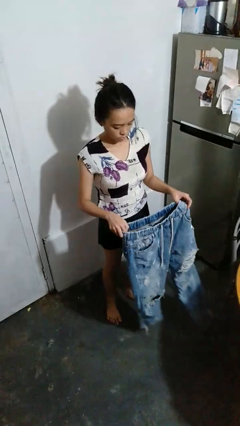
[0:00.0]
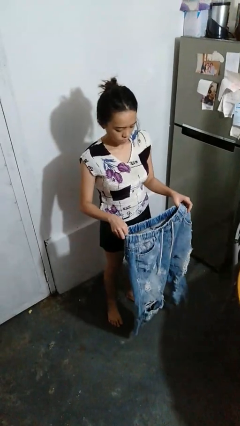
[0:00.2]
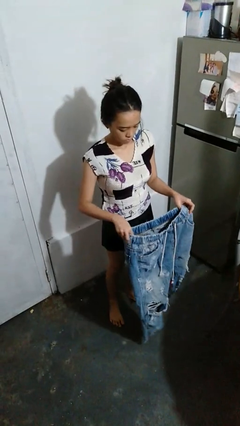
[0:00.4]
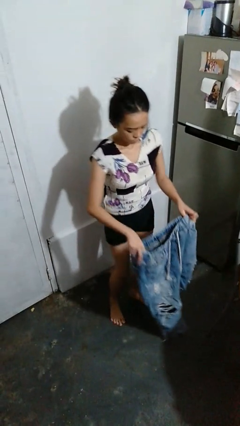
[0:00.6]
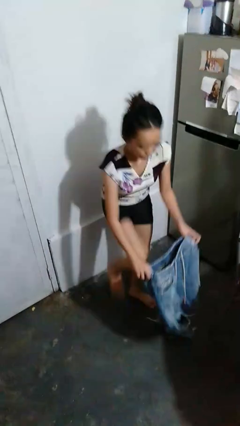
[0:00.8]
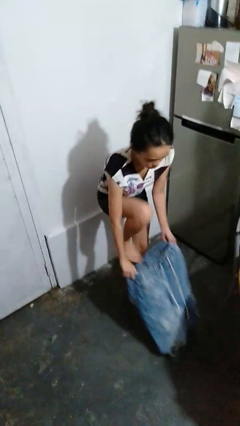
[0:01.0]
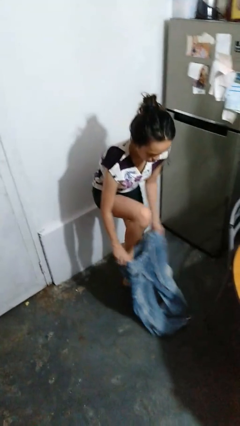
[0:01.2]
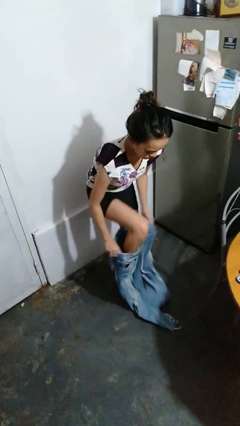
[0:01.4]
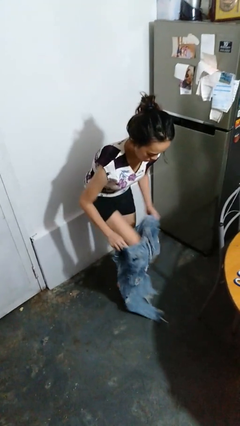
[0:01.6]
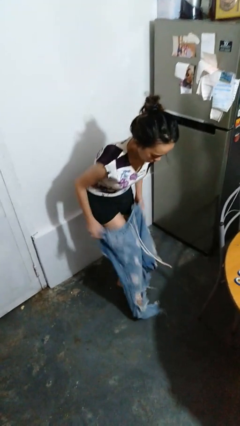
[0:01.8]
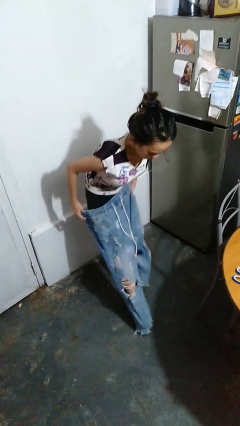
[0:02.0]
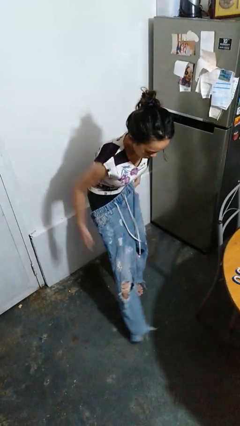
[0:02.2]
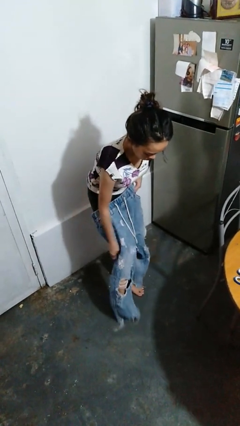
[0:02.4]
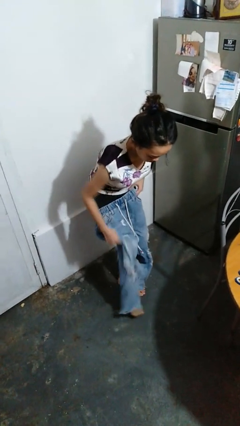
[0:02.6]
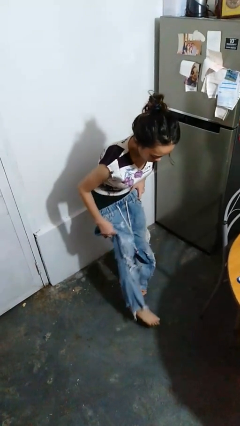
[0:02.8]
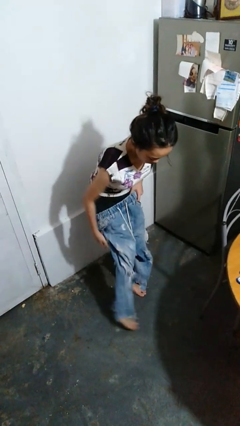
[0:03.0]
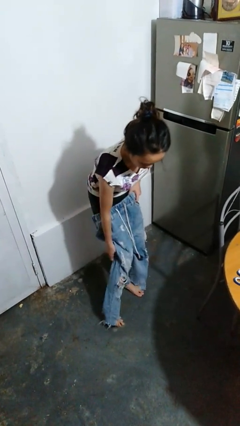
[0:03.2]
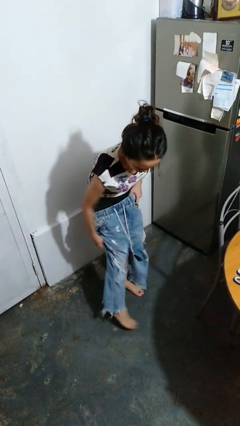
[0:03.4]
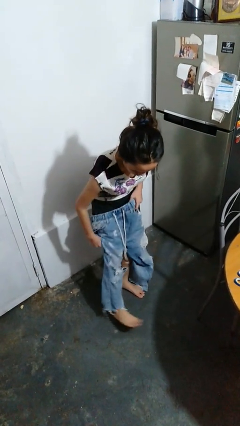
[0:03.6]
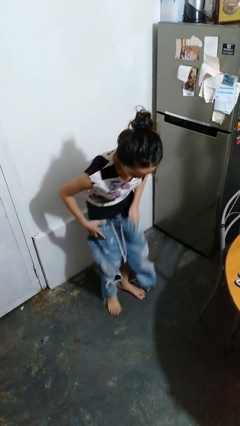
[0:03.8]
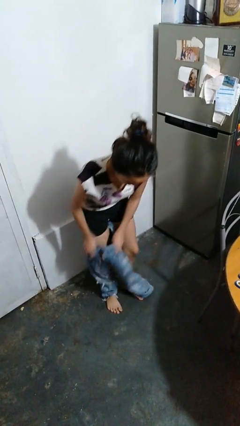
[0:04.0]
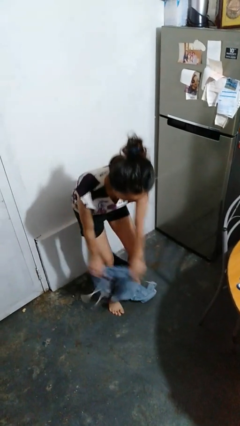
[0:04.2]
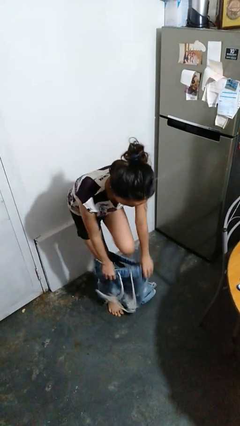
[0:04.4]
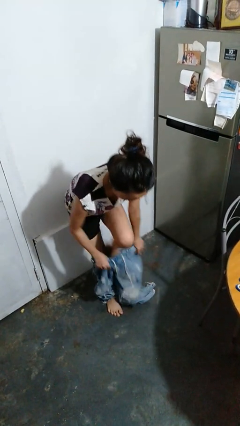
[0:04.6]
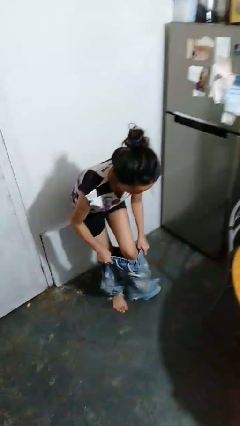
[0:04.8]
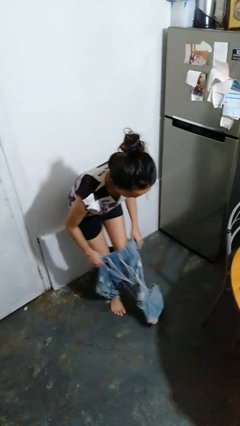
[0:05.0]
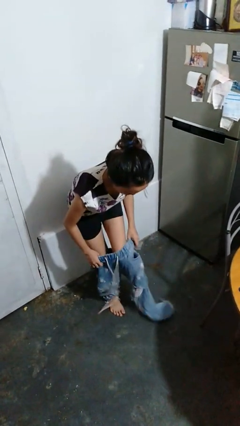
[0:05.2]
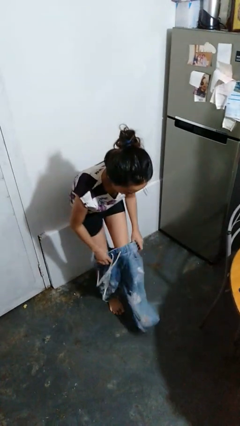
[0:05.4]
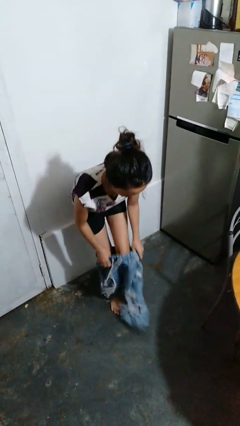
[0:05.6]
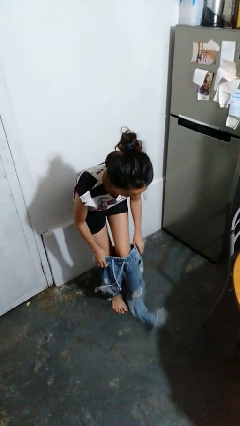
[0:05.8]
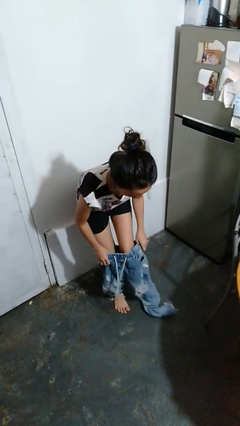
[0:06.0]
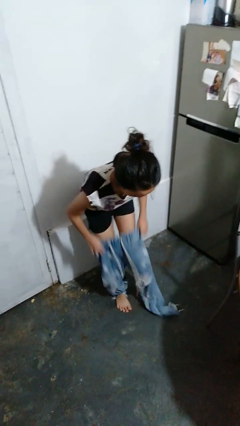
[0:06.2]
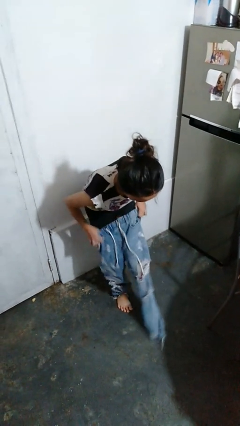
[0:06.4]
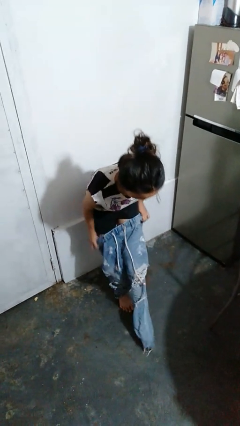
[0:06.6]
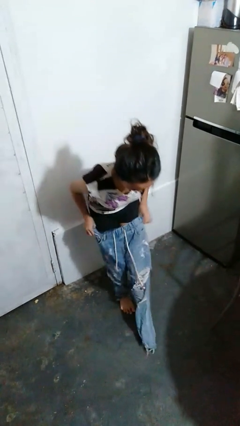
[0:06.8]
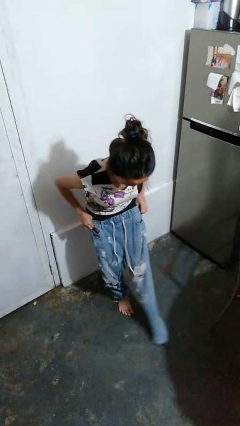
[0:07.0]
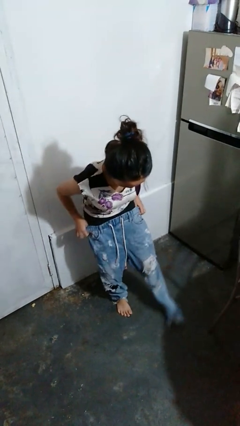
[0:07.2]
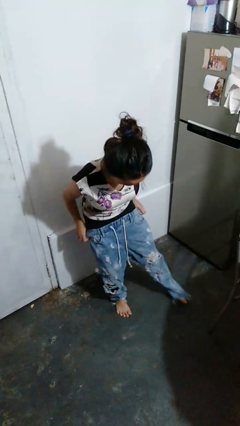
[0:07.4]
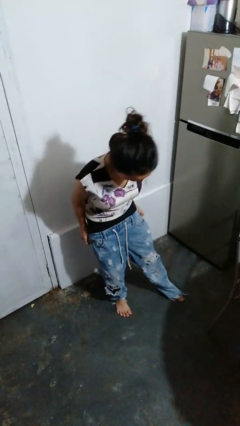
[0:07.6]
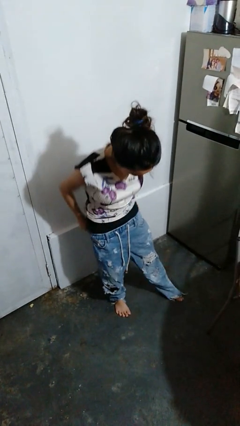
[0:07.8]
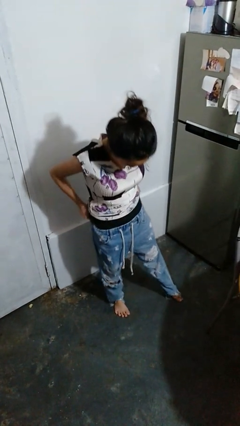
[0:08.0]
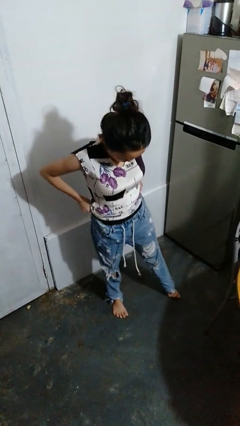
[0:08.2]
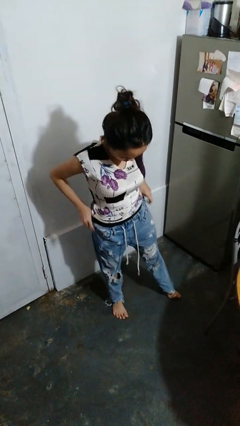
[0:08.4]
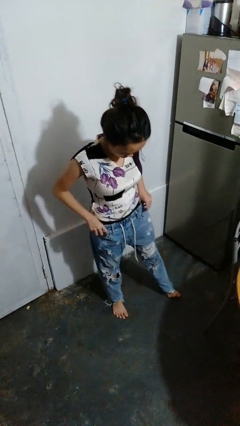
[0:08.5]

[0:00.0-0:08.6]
person puts on pants

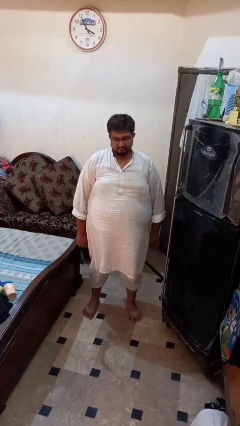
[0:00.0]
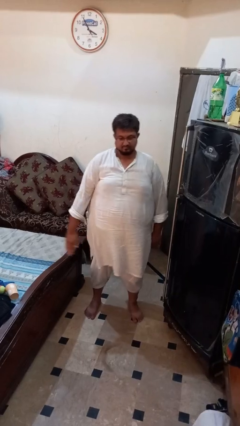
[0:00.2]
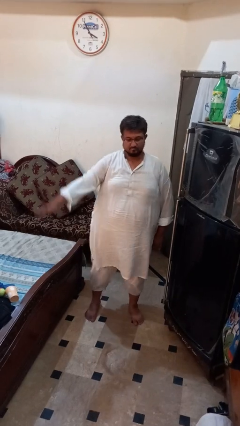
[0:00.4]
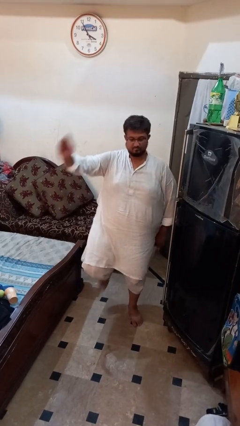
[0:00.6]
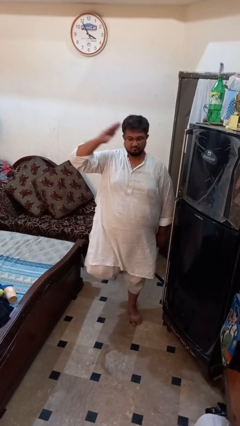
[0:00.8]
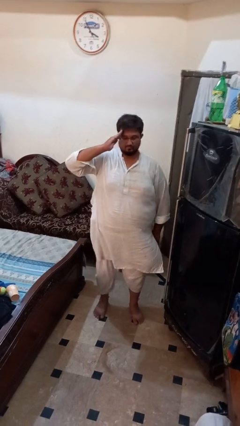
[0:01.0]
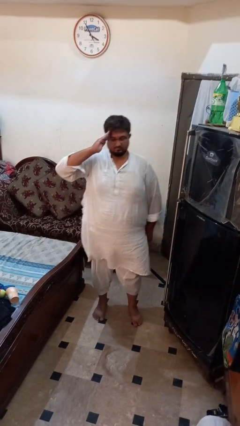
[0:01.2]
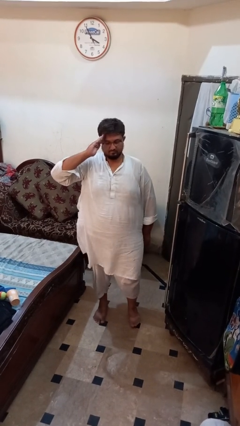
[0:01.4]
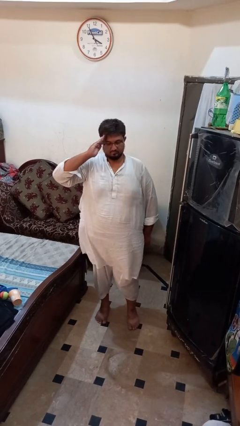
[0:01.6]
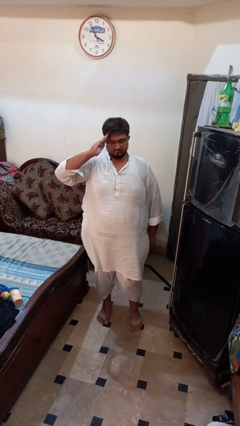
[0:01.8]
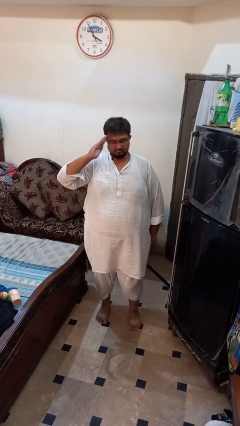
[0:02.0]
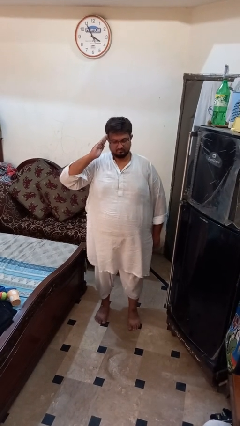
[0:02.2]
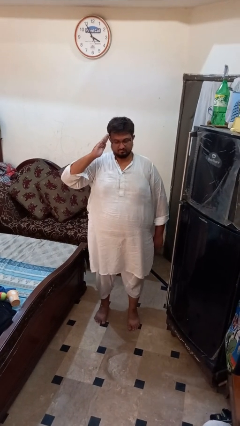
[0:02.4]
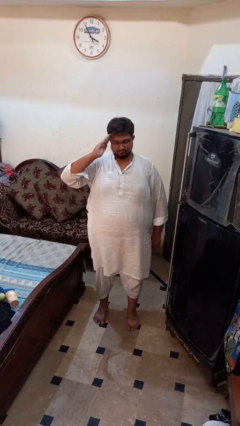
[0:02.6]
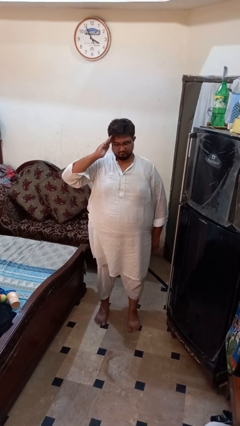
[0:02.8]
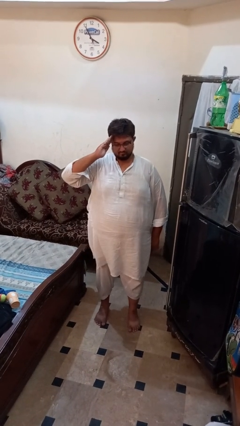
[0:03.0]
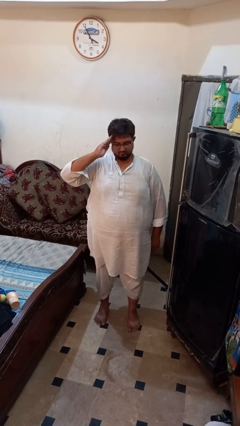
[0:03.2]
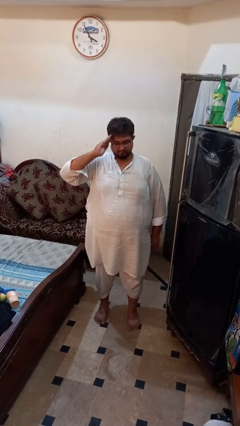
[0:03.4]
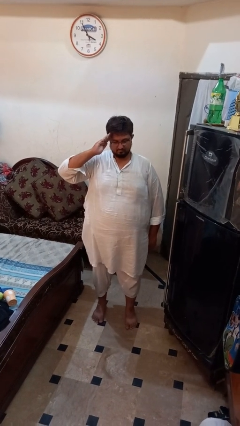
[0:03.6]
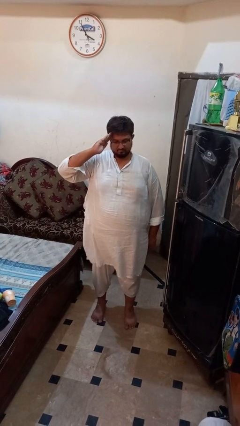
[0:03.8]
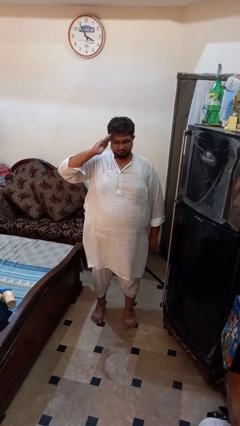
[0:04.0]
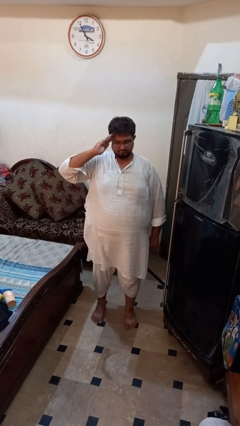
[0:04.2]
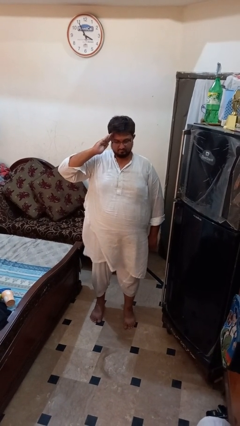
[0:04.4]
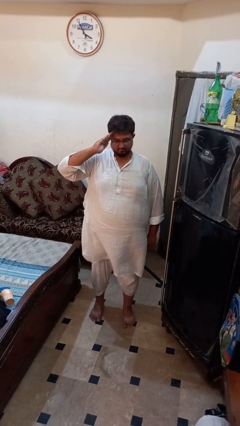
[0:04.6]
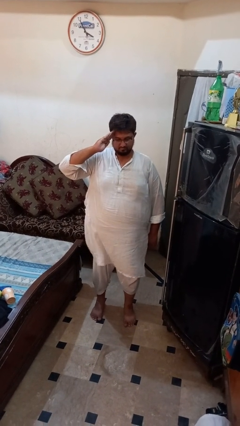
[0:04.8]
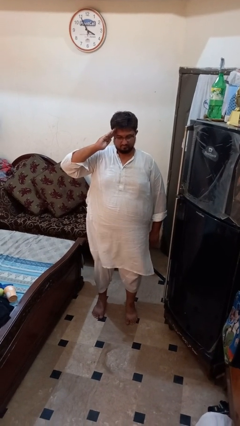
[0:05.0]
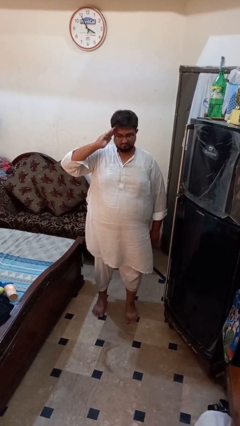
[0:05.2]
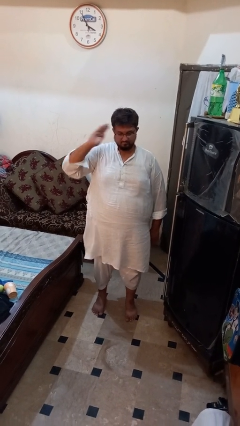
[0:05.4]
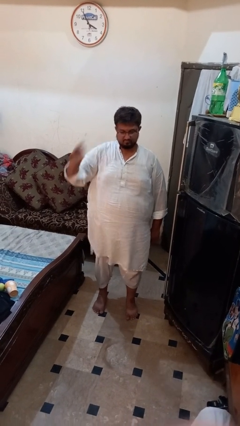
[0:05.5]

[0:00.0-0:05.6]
person salutes

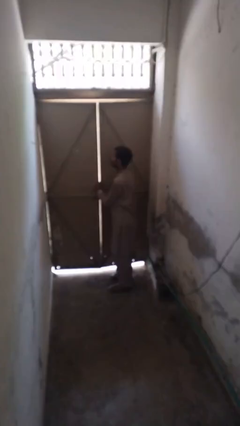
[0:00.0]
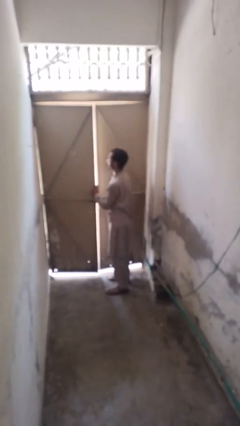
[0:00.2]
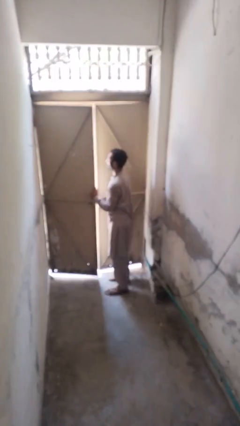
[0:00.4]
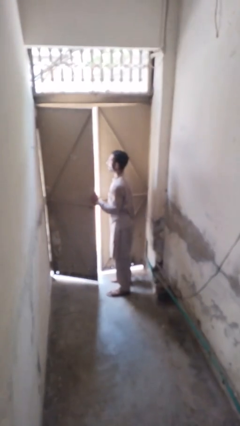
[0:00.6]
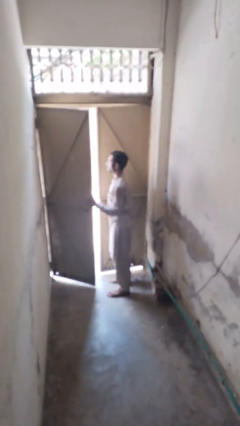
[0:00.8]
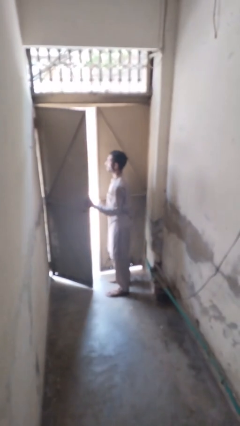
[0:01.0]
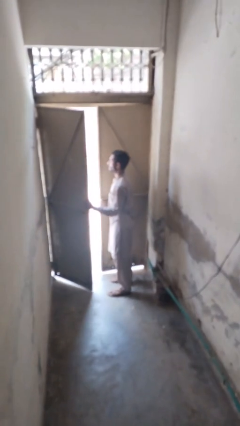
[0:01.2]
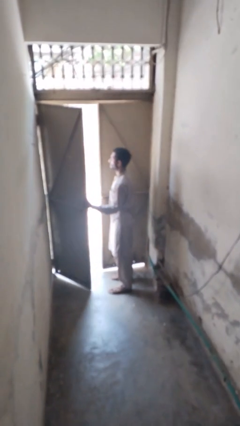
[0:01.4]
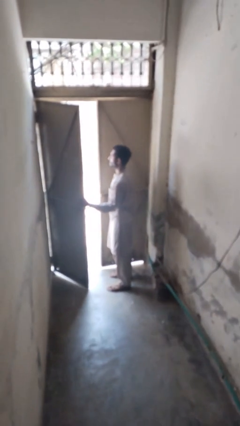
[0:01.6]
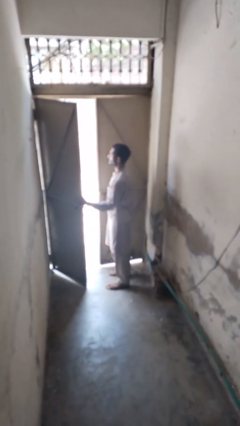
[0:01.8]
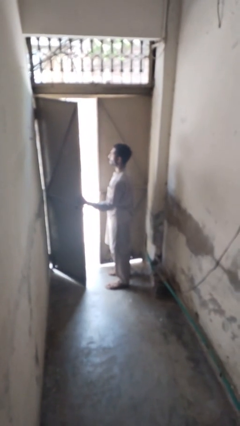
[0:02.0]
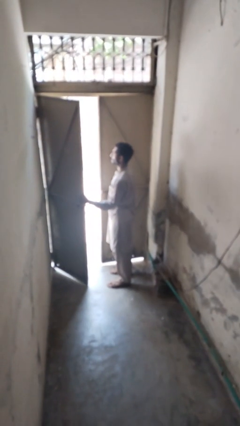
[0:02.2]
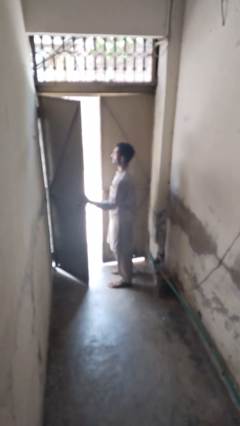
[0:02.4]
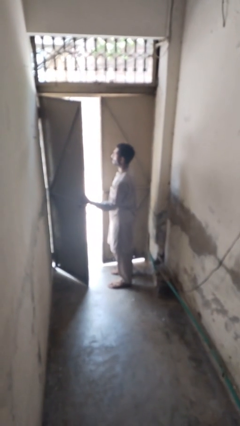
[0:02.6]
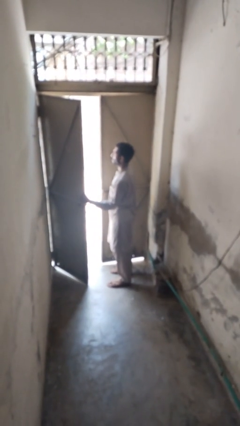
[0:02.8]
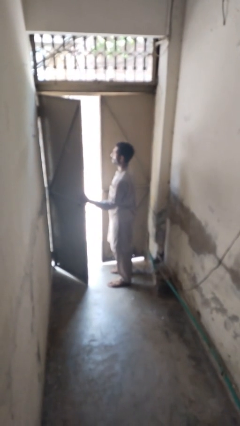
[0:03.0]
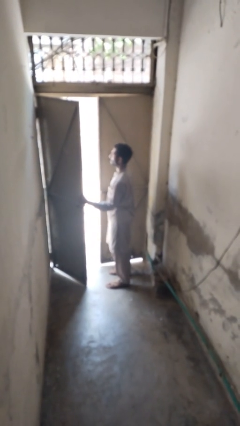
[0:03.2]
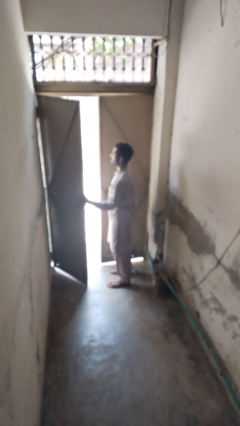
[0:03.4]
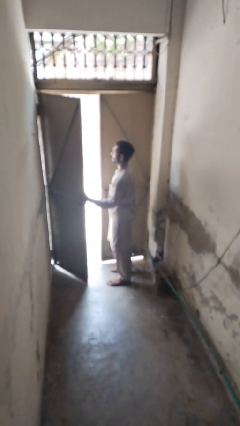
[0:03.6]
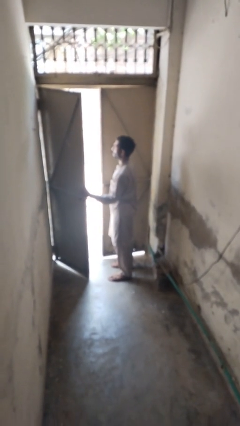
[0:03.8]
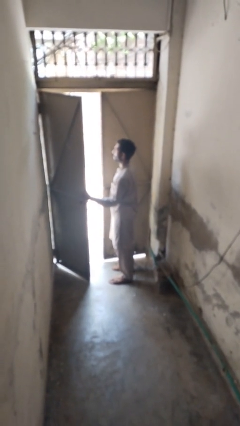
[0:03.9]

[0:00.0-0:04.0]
person opens gate
